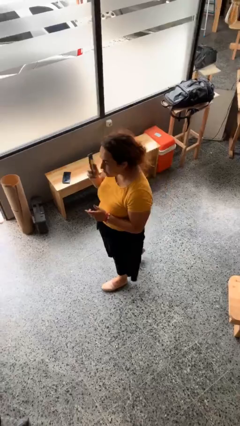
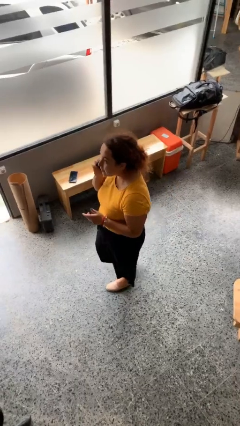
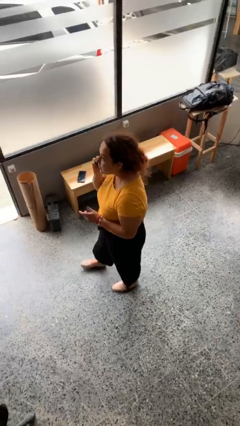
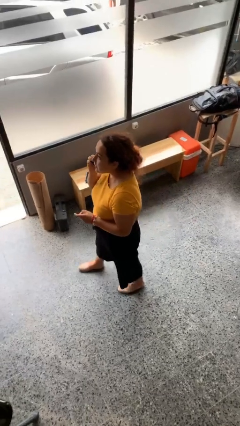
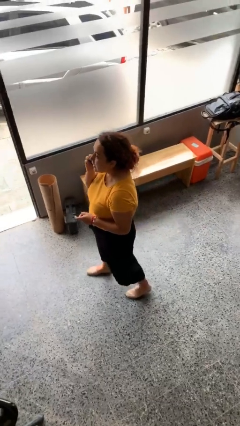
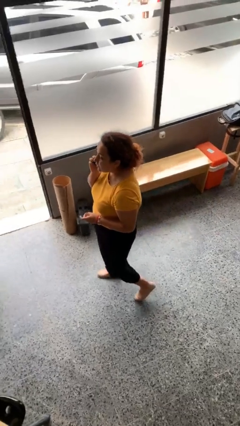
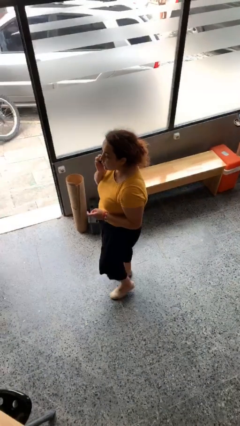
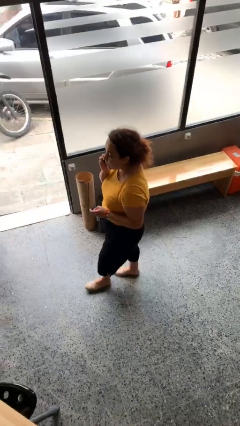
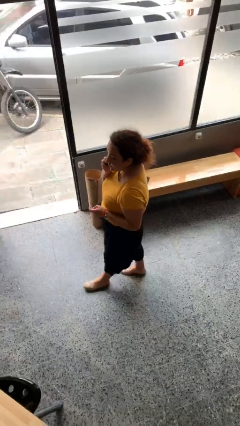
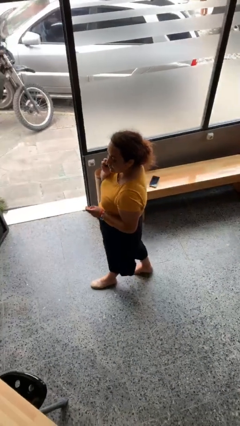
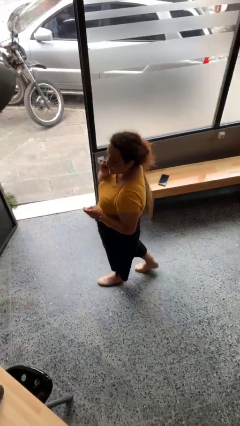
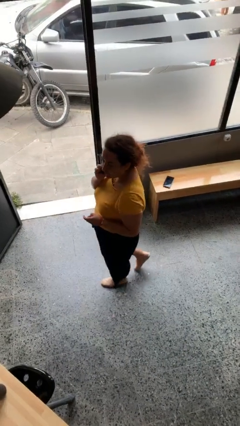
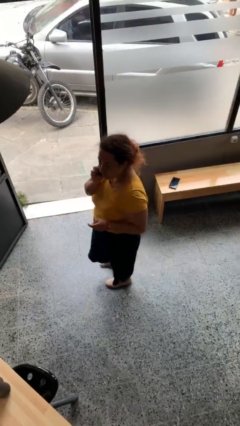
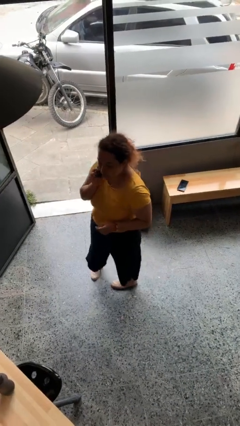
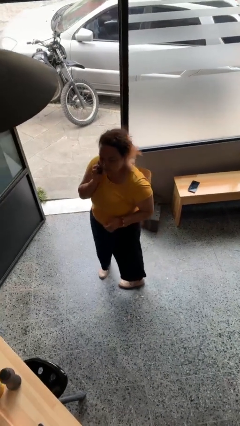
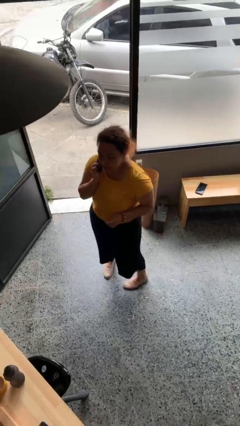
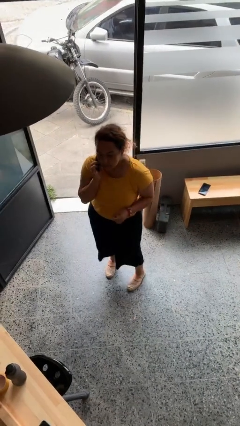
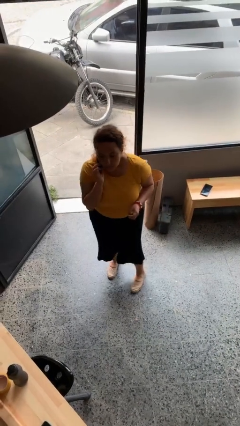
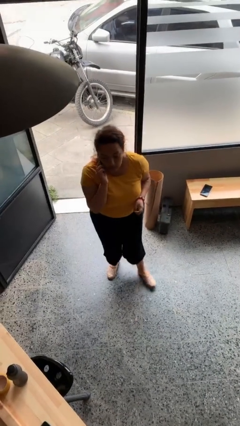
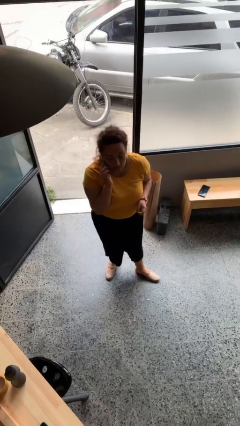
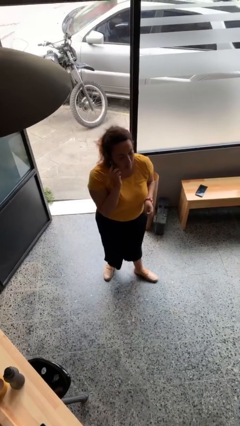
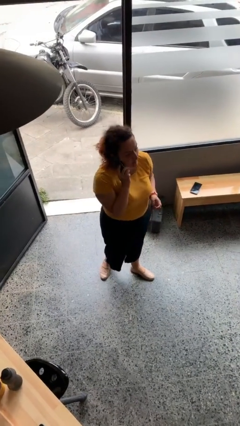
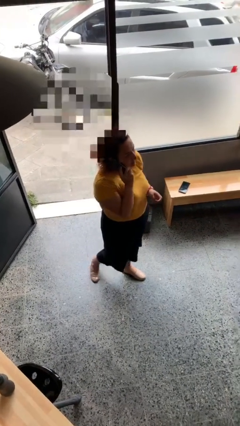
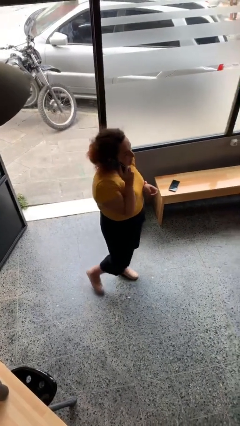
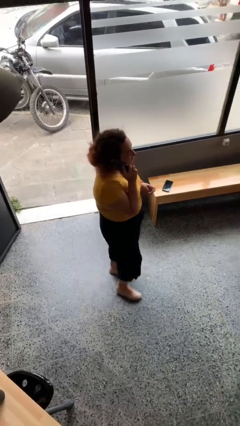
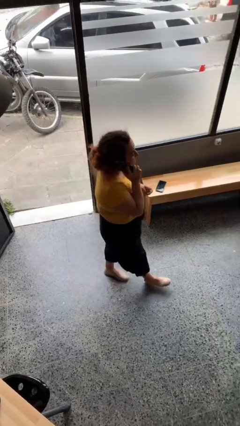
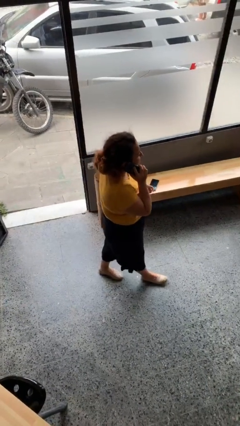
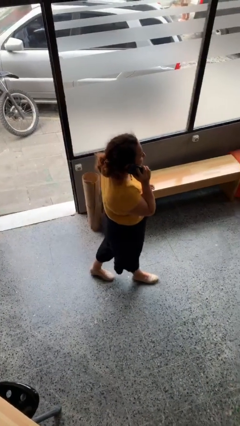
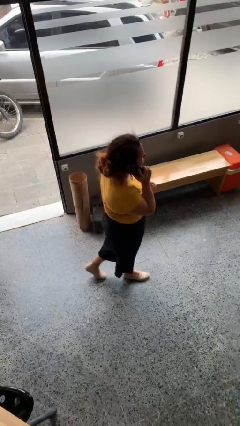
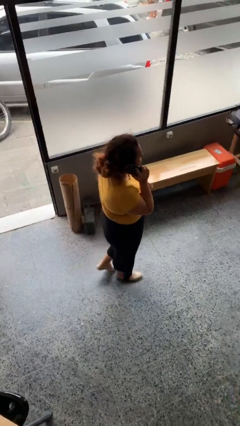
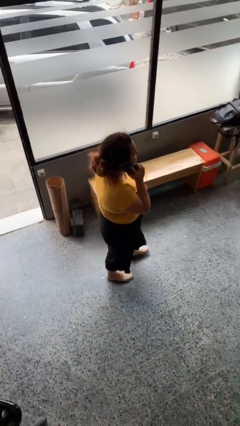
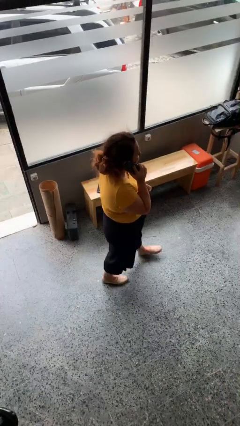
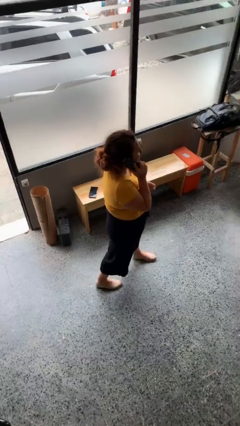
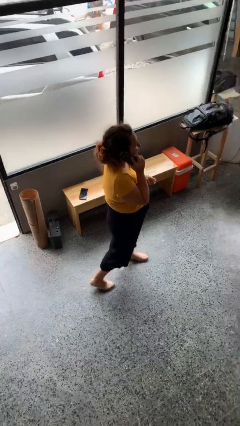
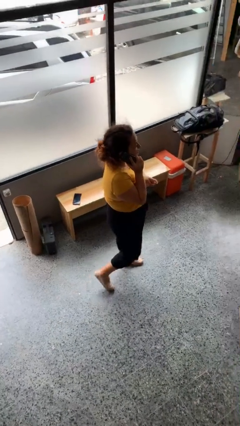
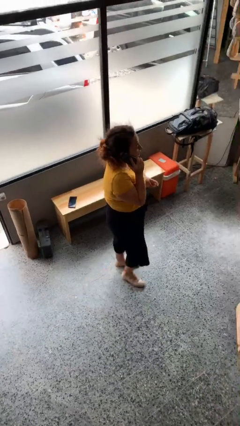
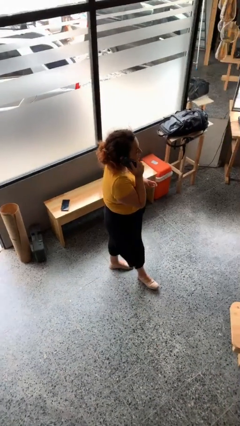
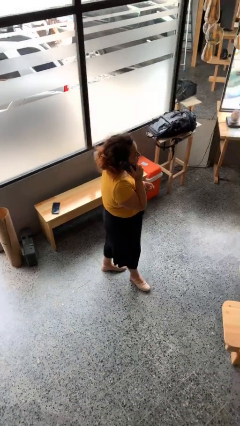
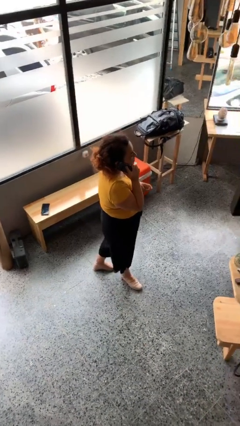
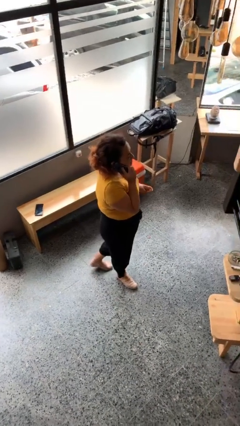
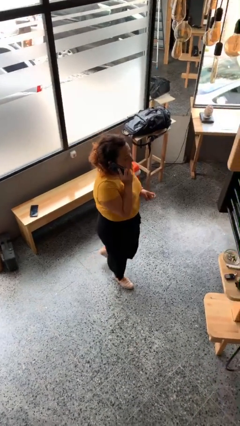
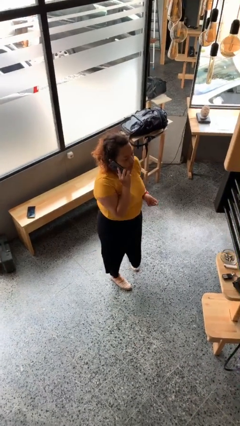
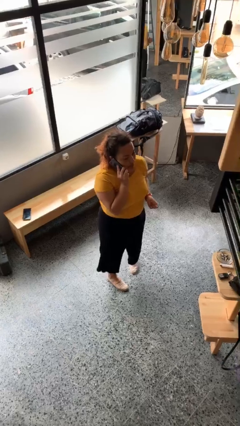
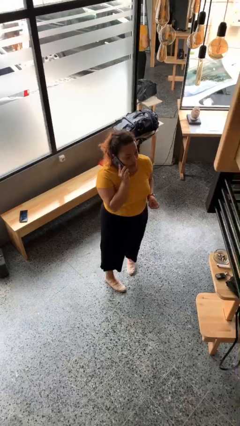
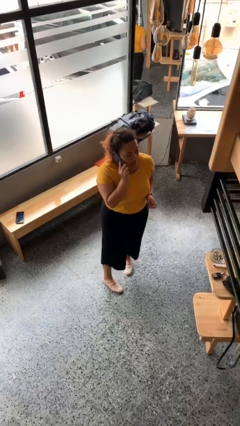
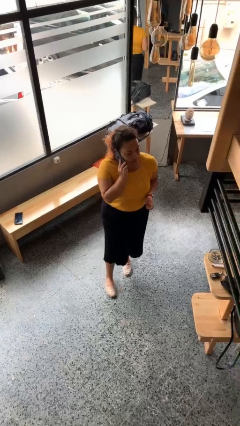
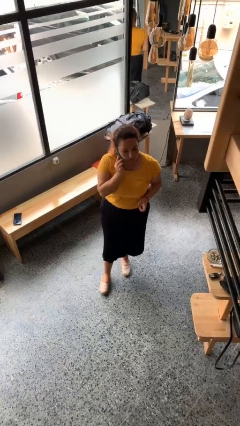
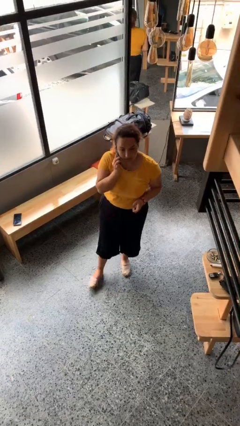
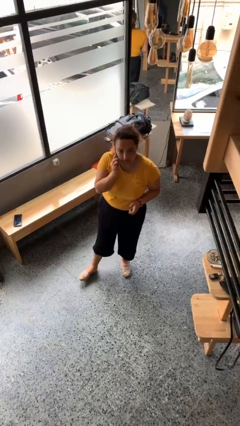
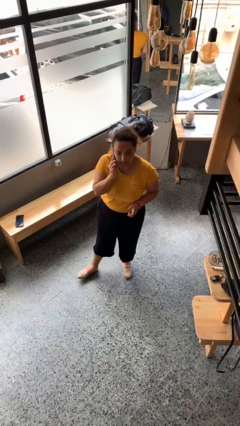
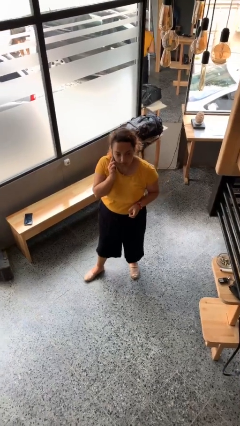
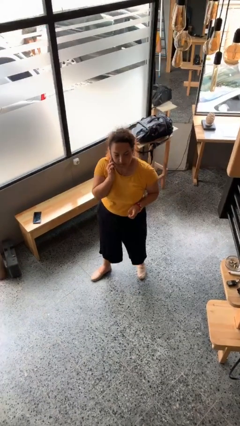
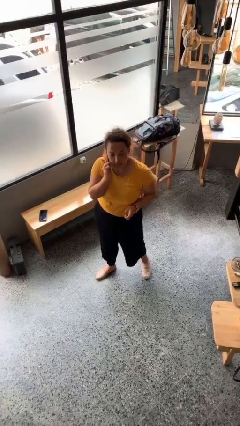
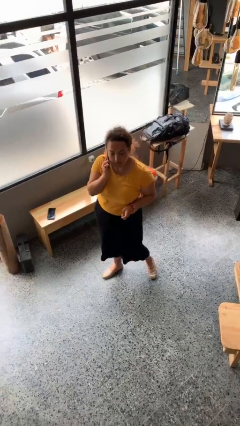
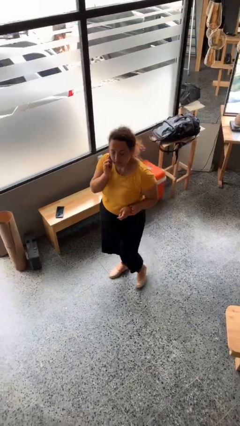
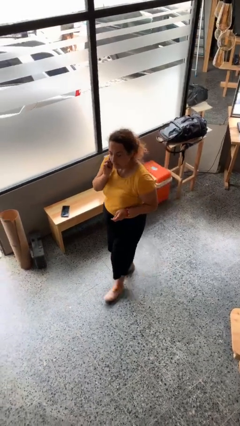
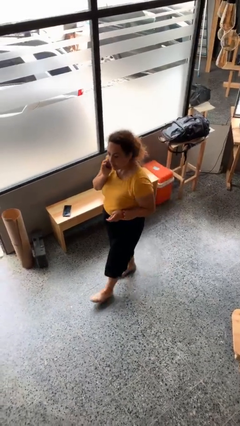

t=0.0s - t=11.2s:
person talks on phone

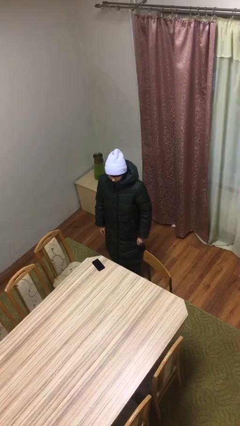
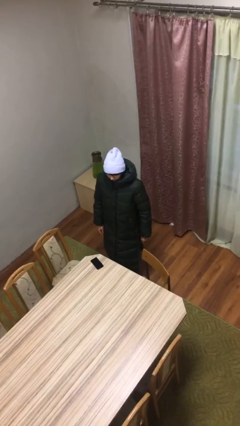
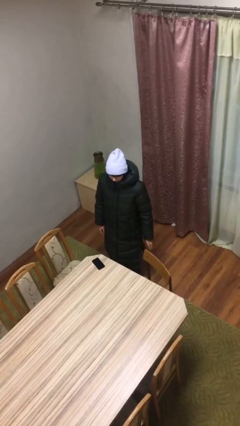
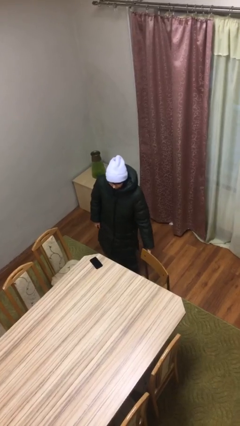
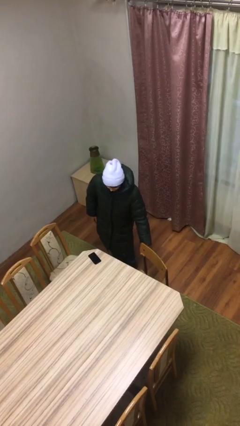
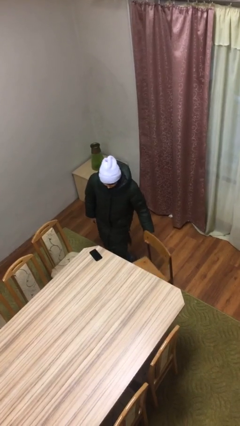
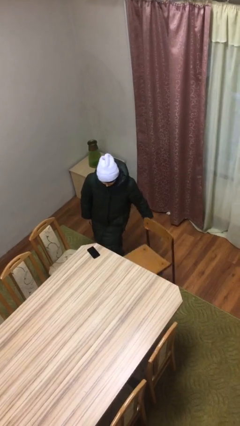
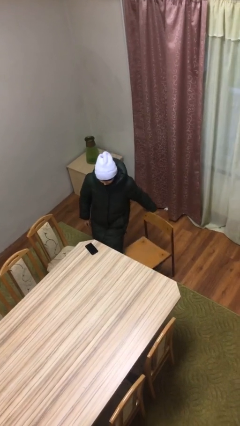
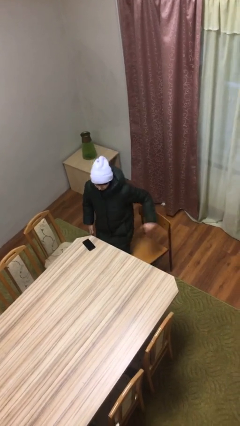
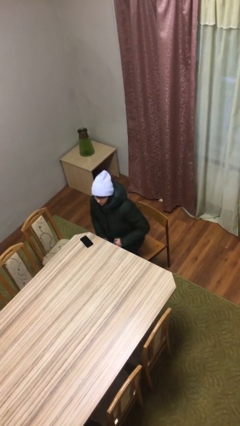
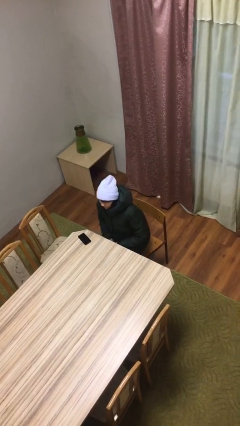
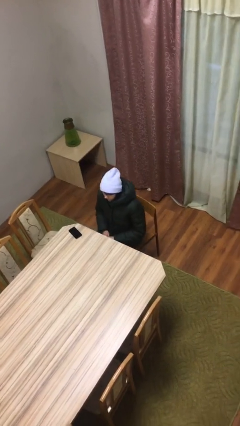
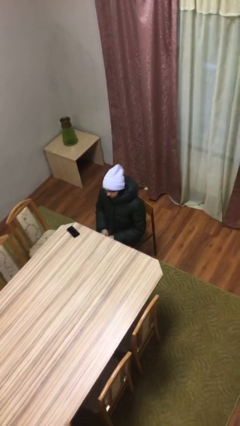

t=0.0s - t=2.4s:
person sits down

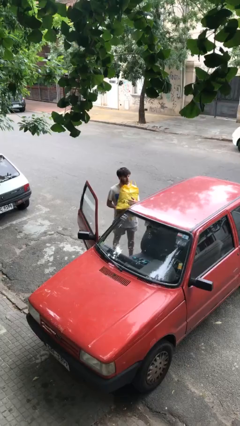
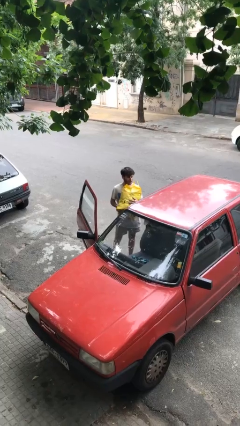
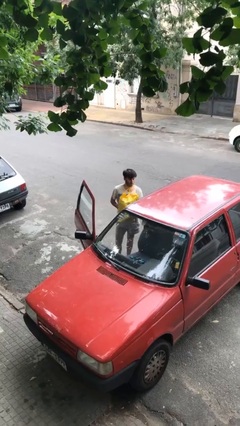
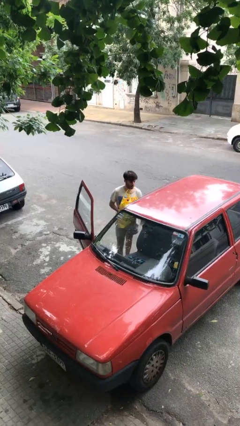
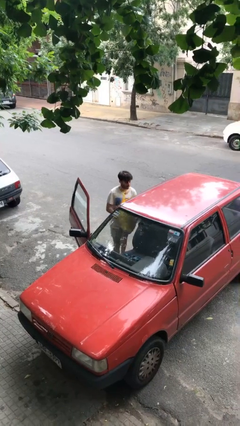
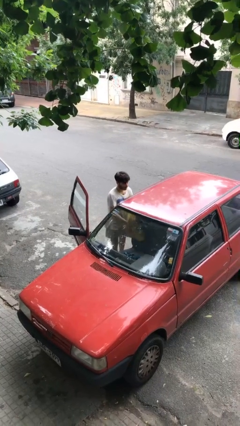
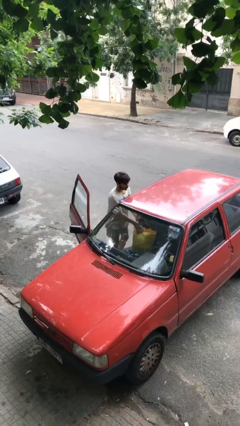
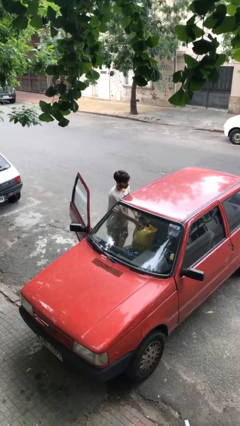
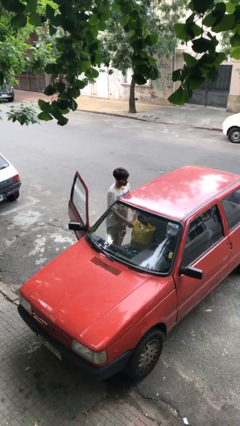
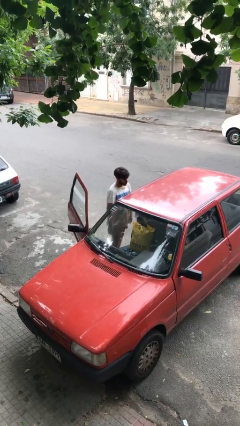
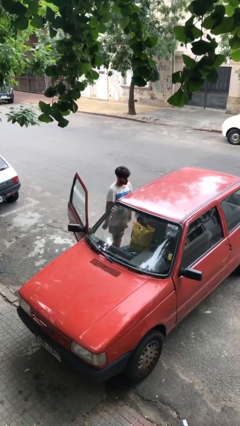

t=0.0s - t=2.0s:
person loads car

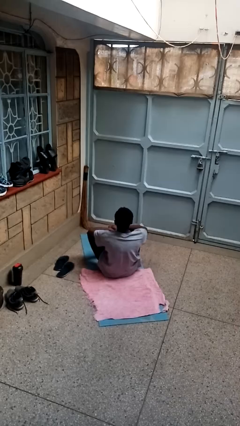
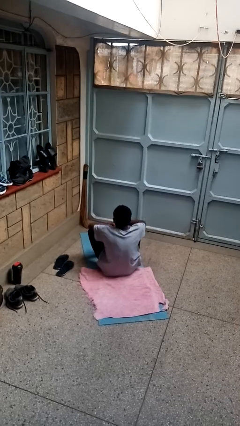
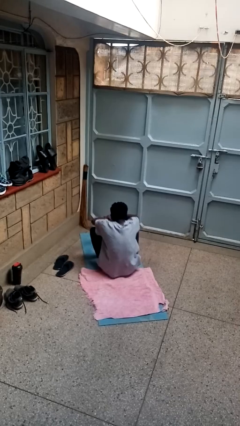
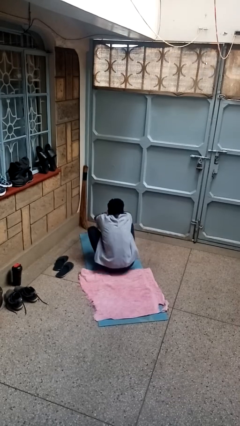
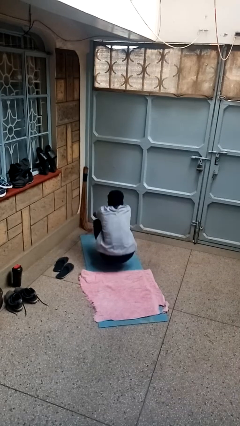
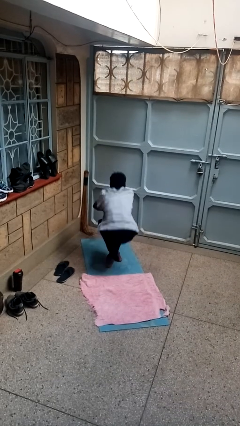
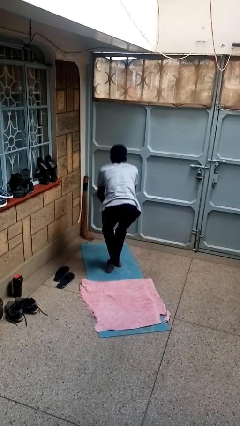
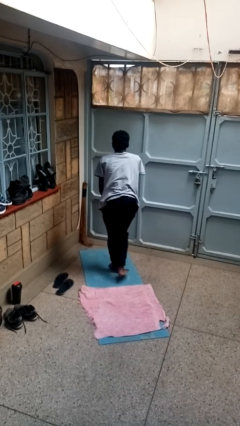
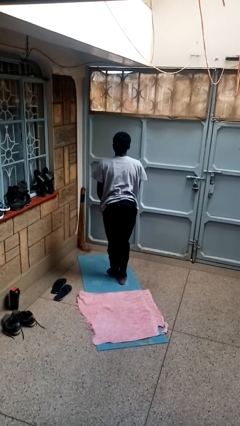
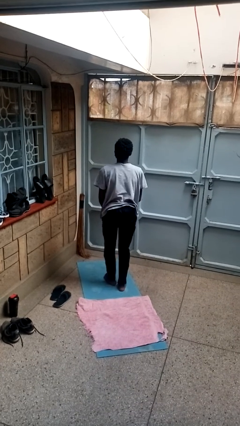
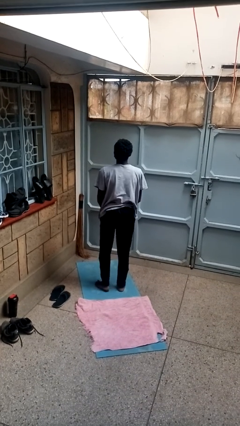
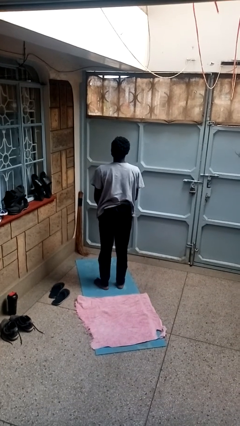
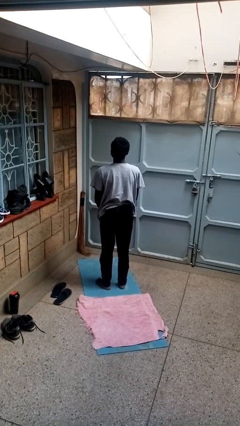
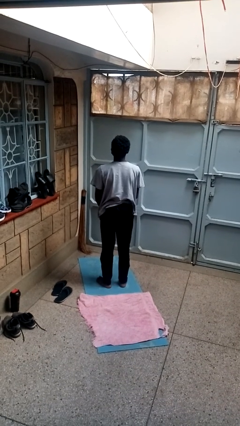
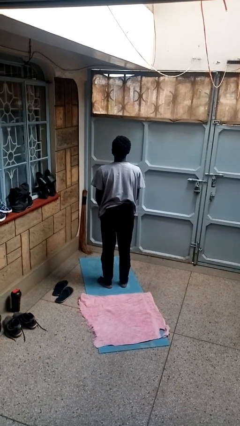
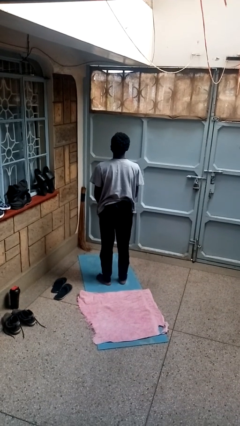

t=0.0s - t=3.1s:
person stands up from floor
